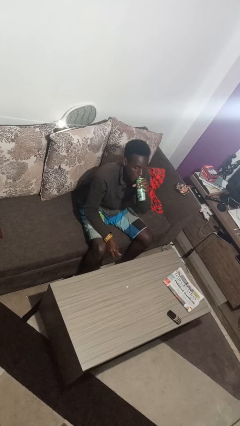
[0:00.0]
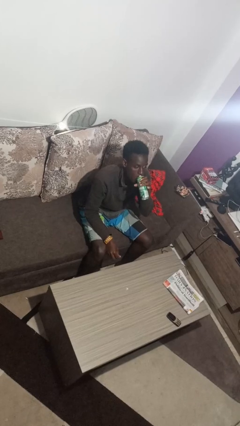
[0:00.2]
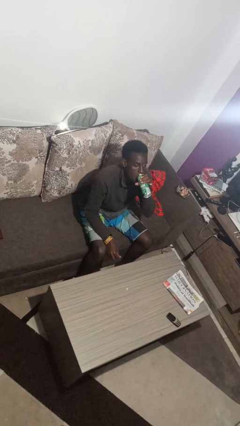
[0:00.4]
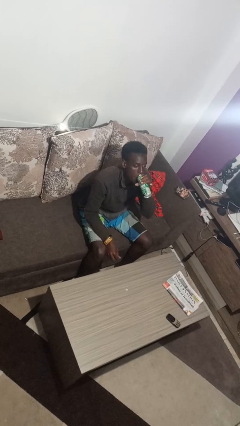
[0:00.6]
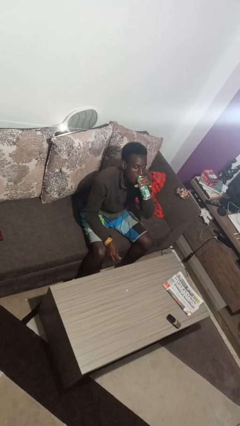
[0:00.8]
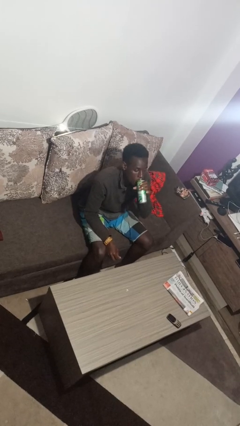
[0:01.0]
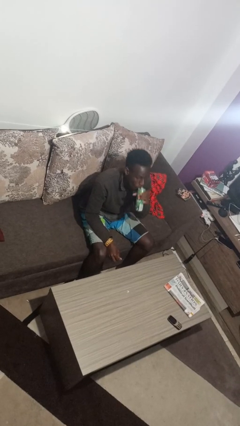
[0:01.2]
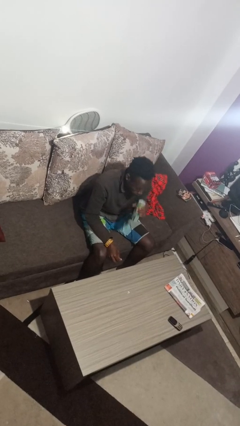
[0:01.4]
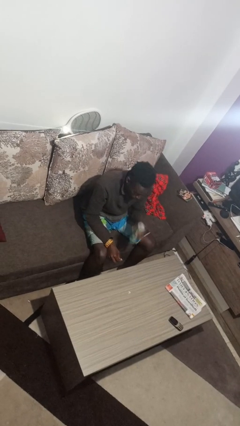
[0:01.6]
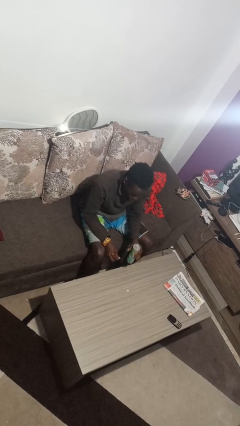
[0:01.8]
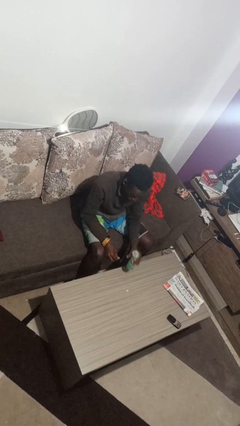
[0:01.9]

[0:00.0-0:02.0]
person drinks from beverage can

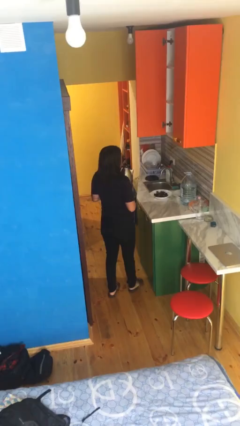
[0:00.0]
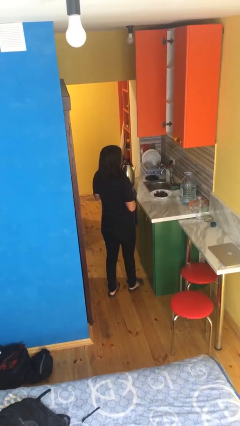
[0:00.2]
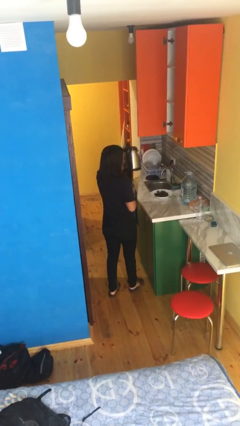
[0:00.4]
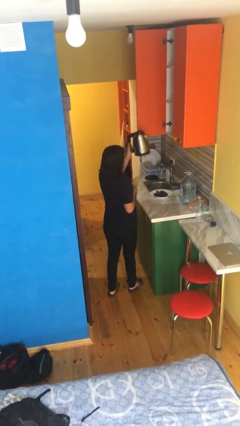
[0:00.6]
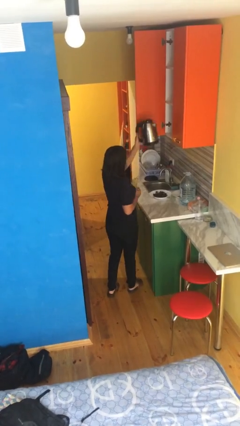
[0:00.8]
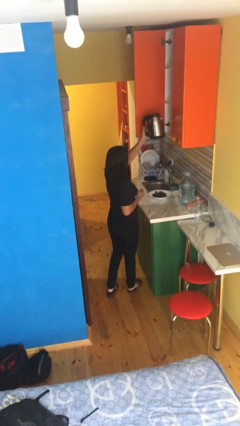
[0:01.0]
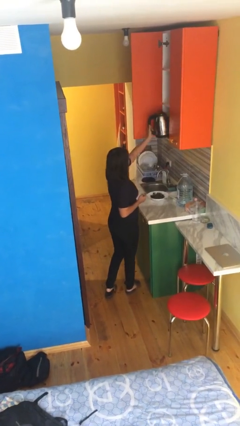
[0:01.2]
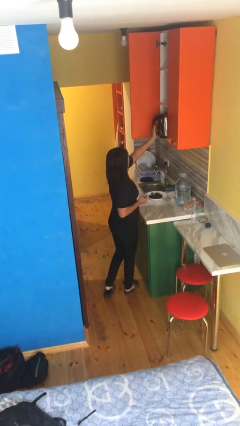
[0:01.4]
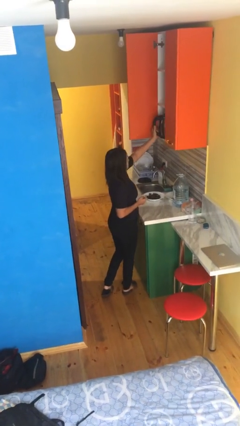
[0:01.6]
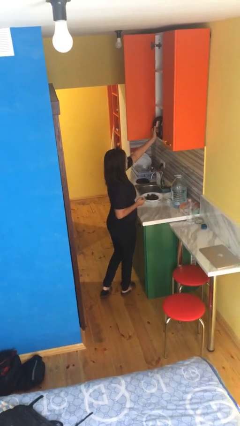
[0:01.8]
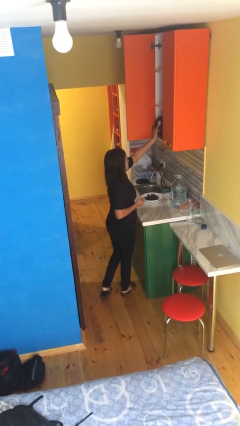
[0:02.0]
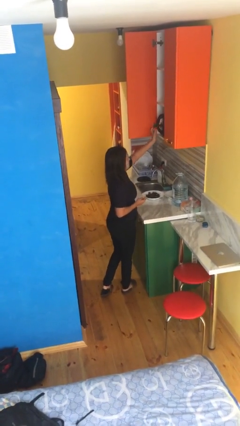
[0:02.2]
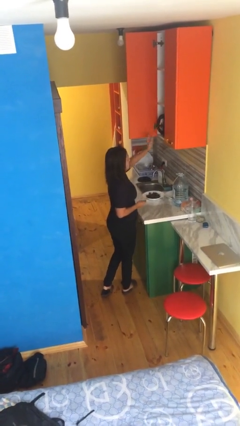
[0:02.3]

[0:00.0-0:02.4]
person puts down object into cabinet

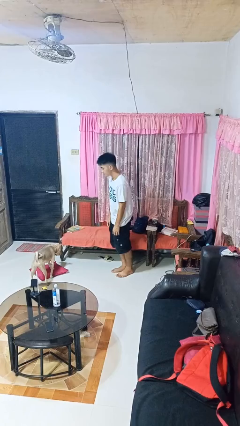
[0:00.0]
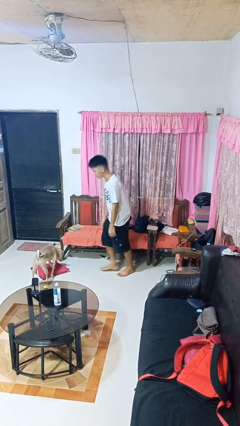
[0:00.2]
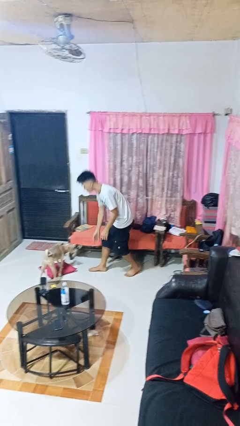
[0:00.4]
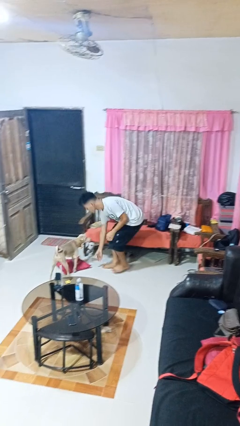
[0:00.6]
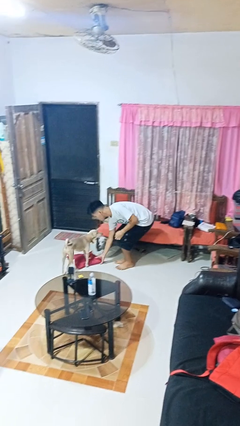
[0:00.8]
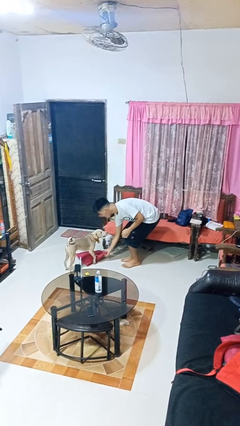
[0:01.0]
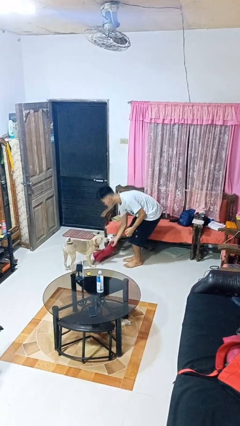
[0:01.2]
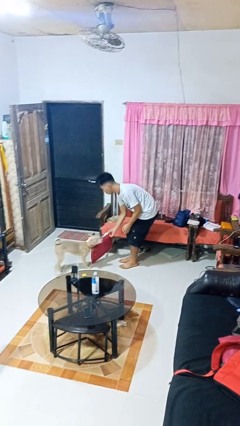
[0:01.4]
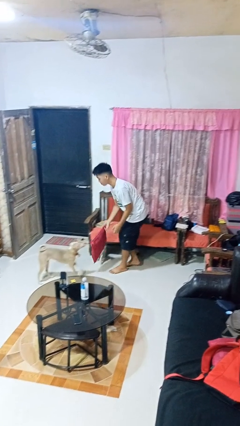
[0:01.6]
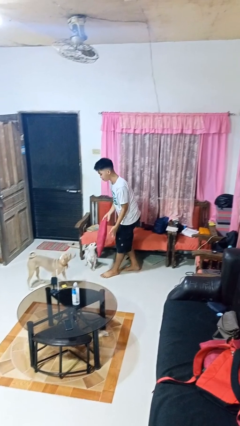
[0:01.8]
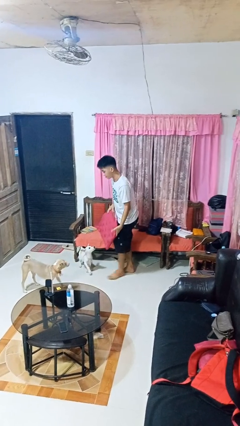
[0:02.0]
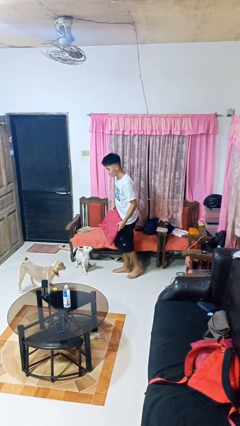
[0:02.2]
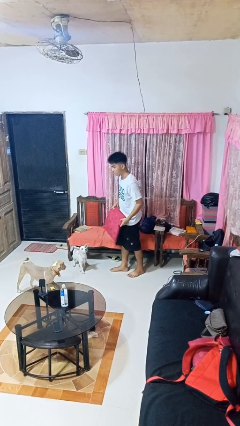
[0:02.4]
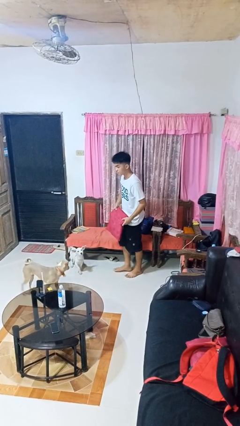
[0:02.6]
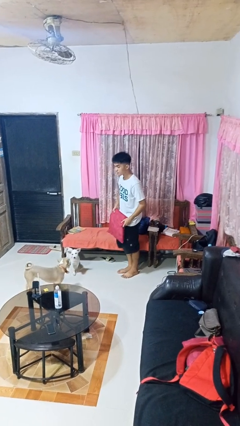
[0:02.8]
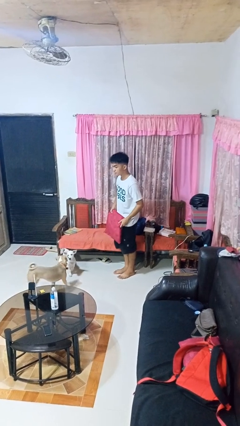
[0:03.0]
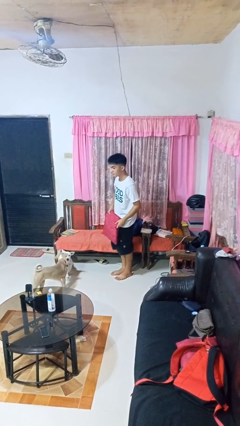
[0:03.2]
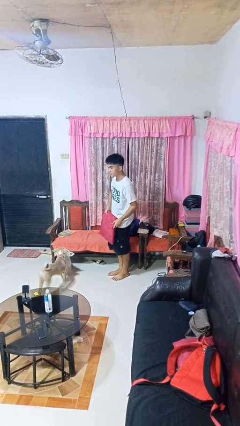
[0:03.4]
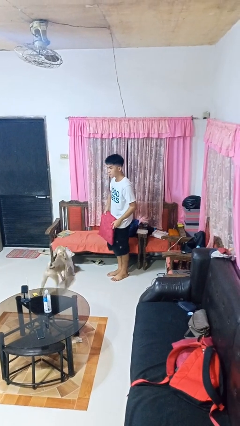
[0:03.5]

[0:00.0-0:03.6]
person picks up object from floor

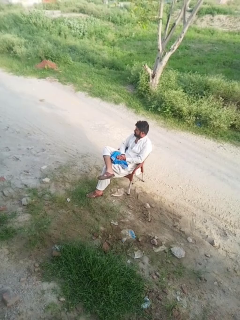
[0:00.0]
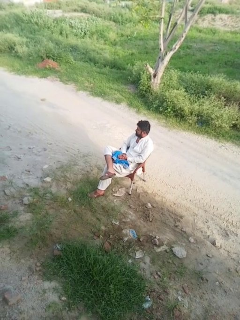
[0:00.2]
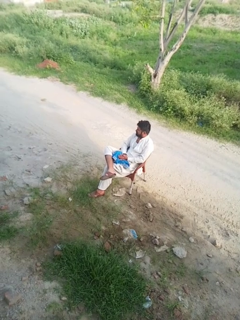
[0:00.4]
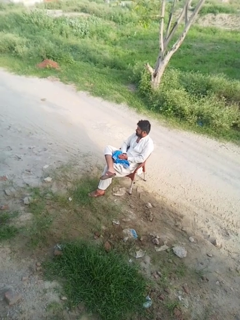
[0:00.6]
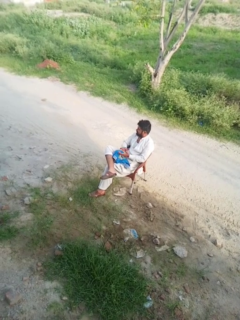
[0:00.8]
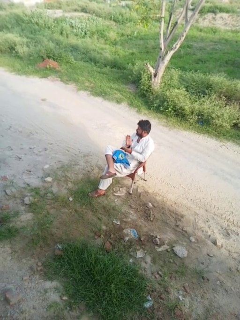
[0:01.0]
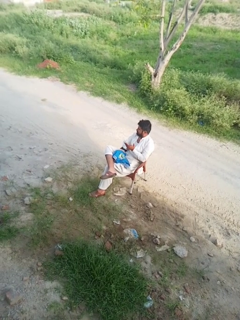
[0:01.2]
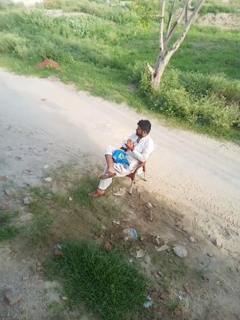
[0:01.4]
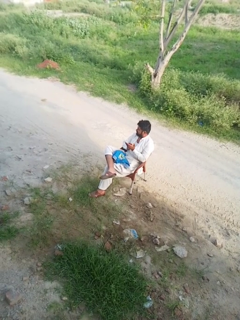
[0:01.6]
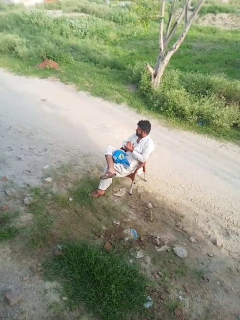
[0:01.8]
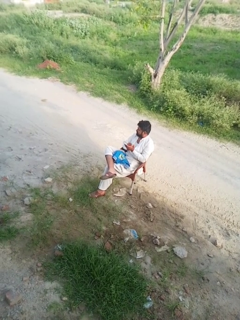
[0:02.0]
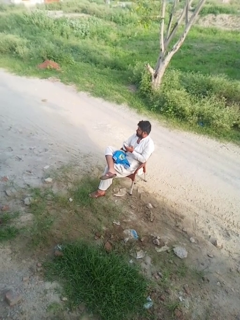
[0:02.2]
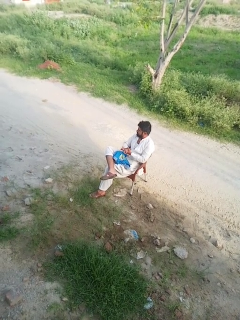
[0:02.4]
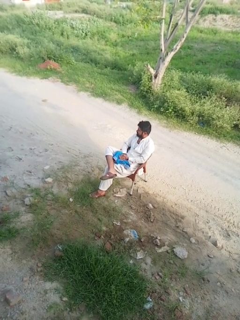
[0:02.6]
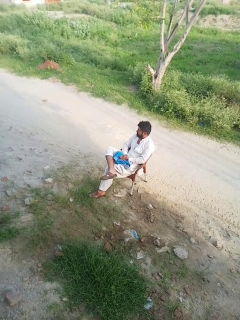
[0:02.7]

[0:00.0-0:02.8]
person claps hands

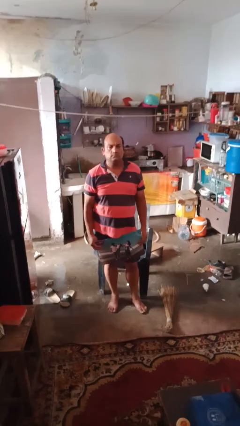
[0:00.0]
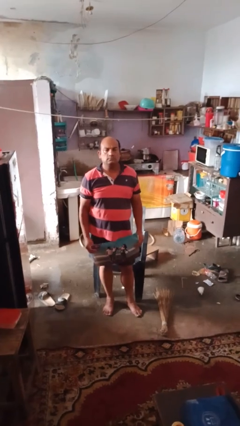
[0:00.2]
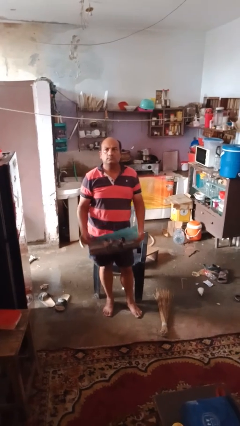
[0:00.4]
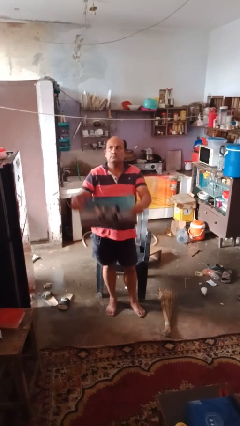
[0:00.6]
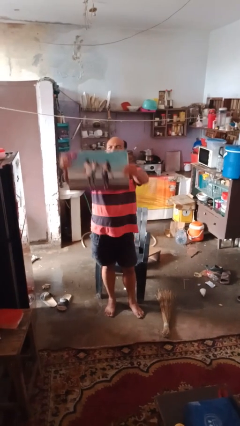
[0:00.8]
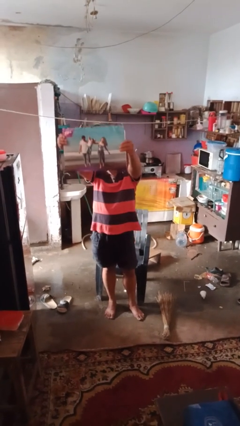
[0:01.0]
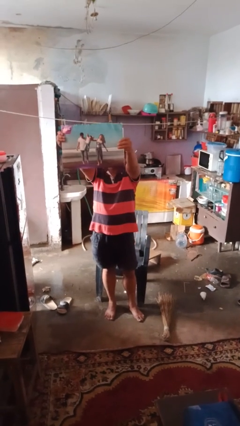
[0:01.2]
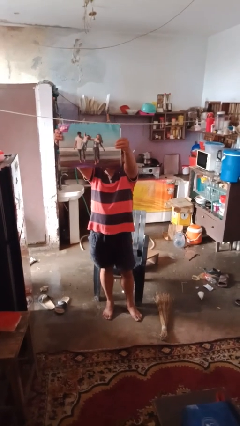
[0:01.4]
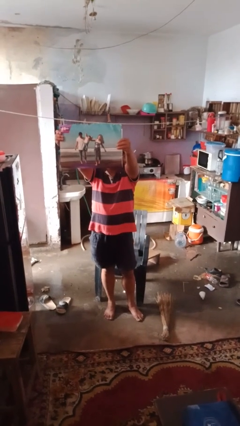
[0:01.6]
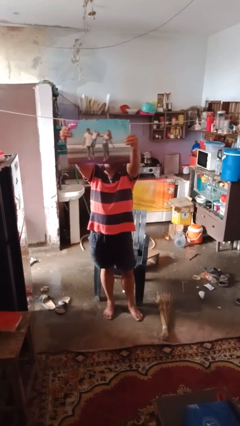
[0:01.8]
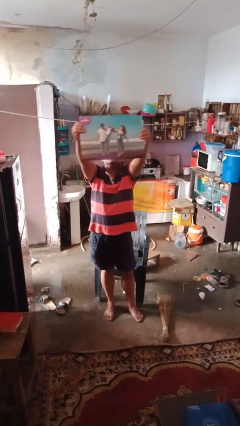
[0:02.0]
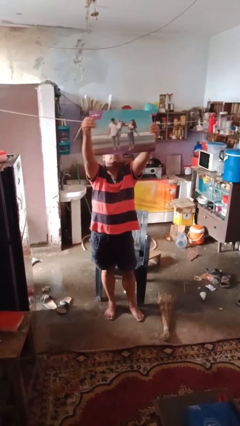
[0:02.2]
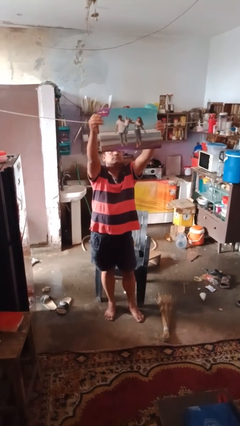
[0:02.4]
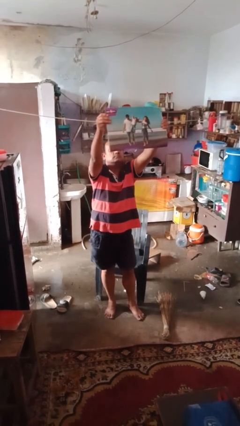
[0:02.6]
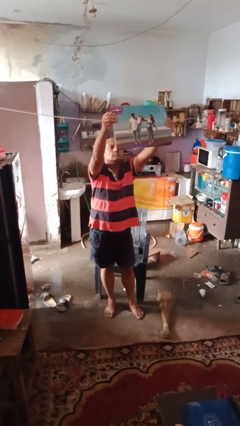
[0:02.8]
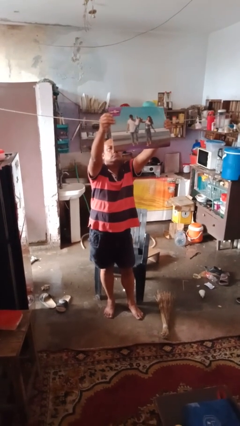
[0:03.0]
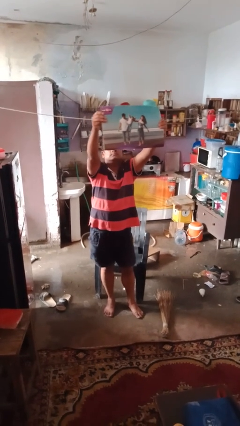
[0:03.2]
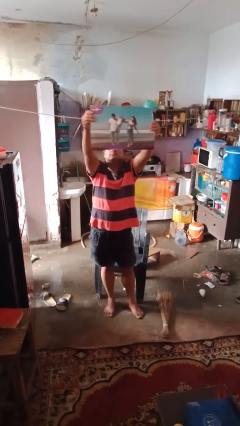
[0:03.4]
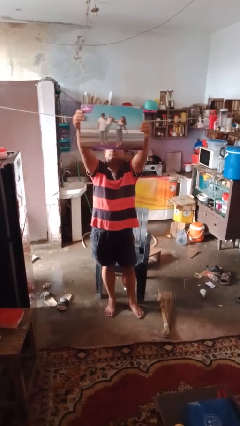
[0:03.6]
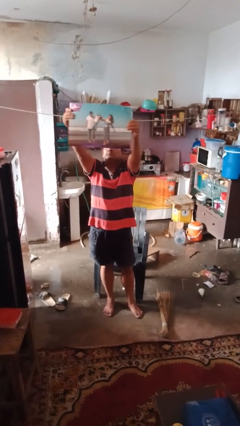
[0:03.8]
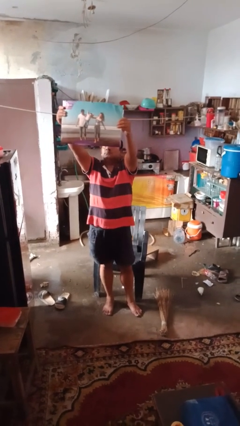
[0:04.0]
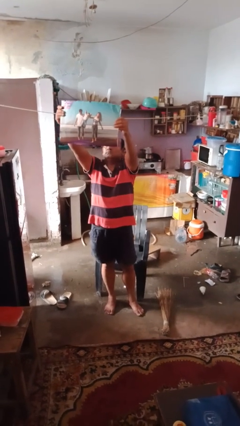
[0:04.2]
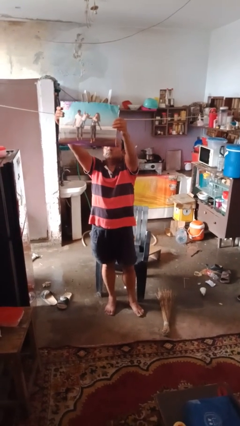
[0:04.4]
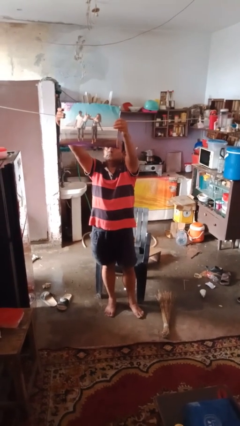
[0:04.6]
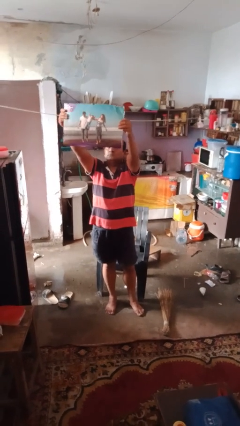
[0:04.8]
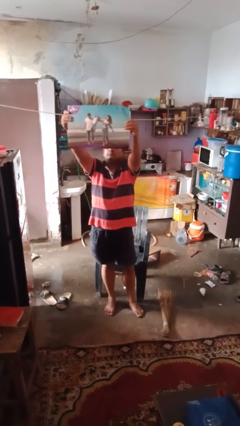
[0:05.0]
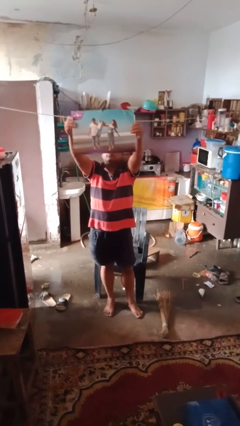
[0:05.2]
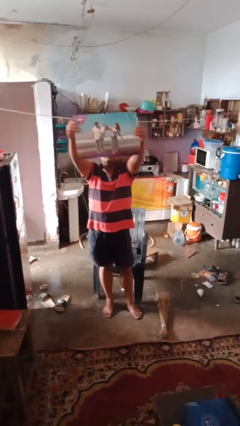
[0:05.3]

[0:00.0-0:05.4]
person holds object above head

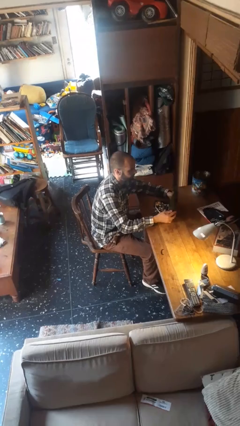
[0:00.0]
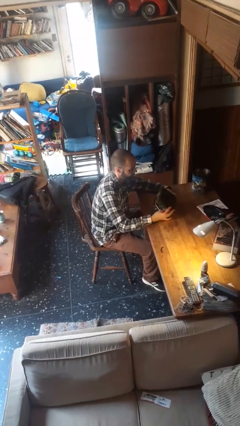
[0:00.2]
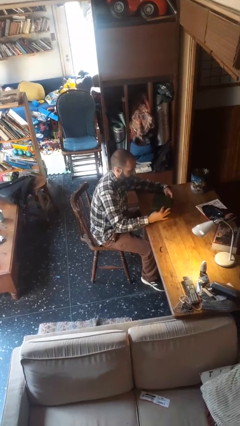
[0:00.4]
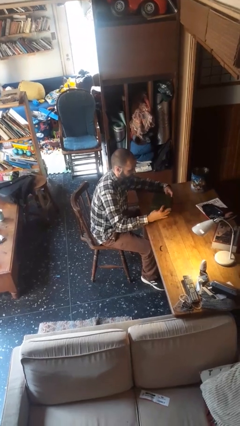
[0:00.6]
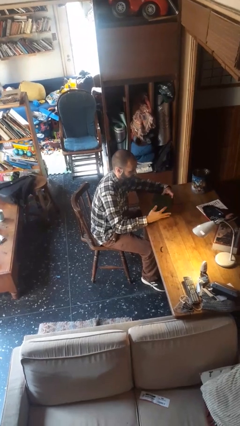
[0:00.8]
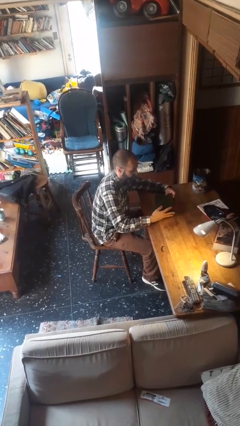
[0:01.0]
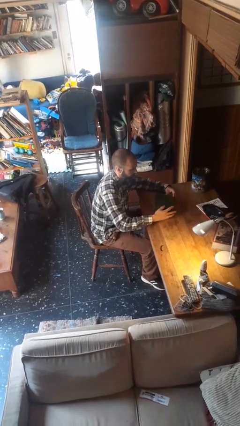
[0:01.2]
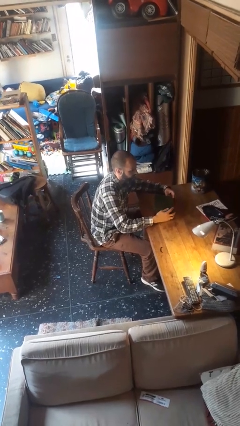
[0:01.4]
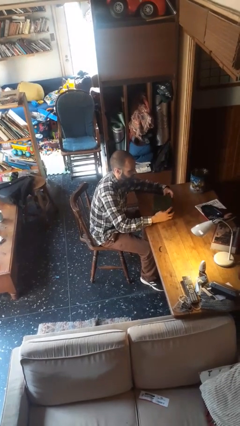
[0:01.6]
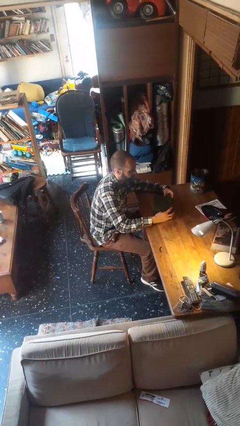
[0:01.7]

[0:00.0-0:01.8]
person closes jewelry box
